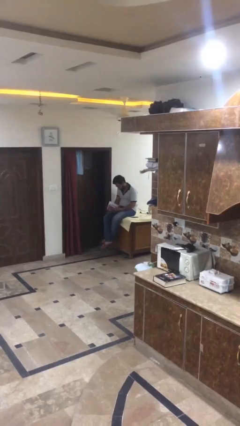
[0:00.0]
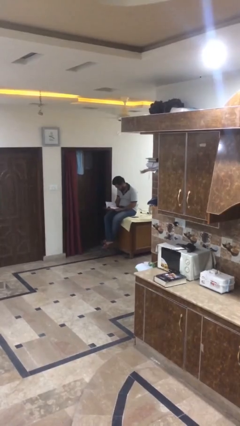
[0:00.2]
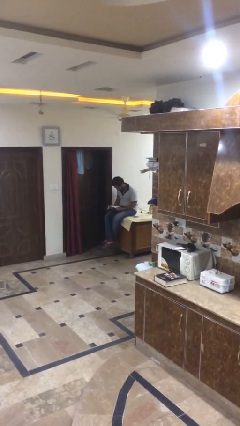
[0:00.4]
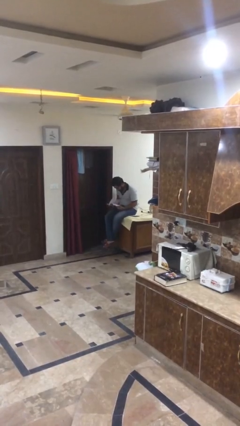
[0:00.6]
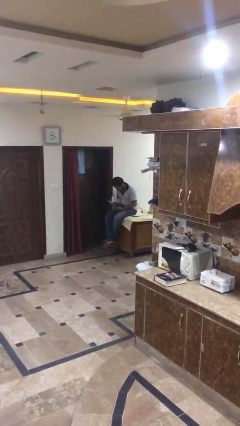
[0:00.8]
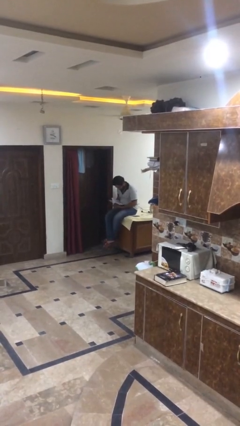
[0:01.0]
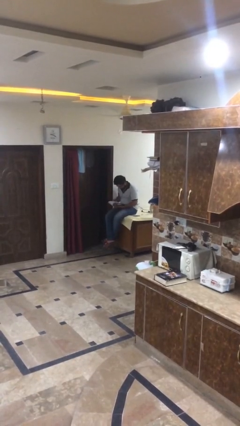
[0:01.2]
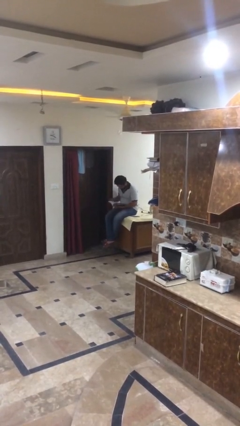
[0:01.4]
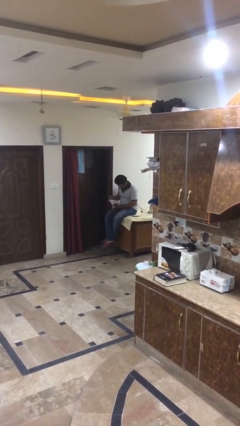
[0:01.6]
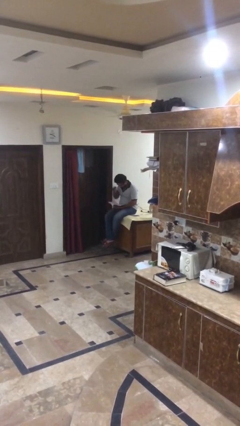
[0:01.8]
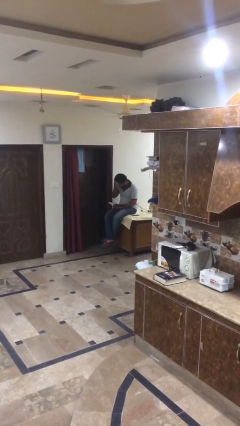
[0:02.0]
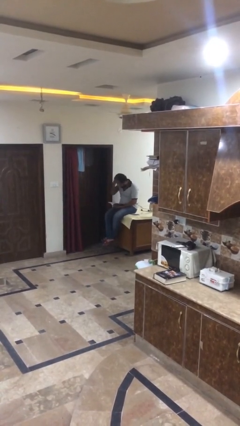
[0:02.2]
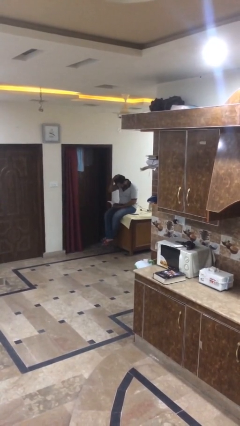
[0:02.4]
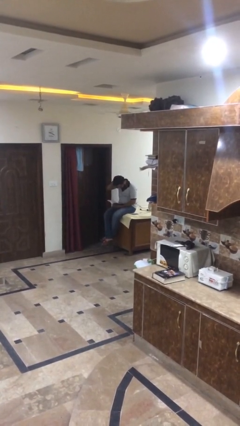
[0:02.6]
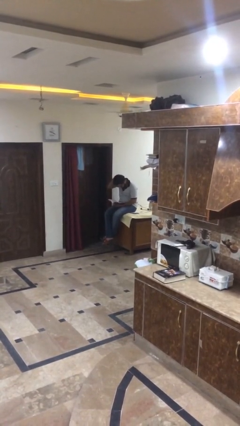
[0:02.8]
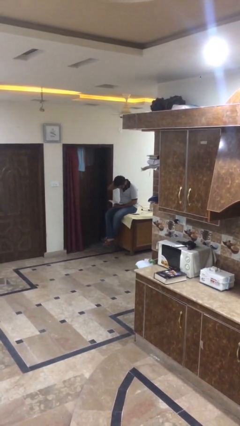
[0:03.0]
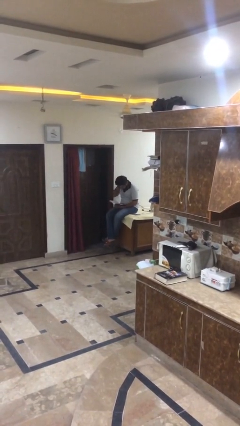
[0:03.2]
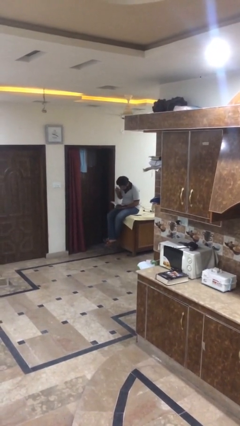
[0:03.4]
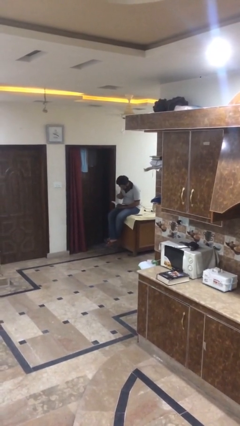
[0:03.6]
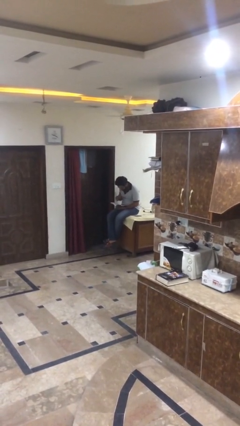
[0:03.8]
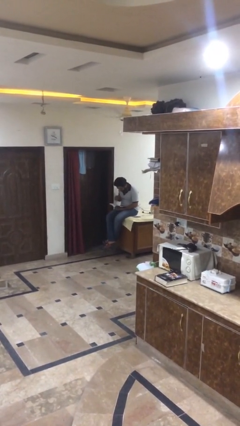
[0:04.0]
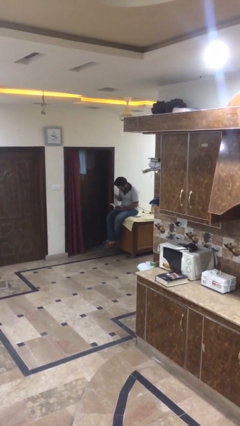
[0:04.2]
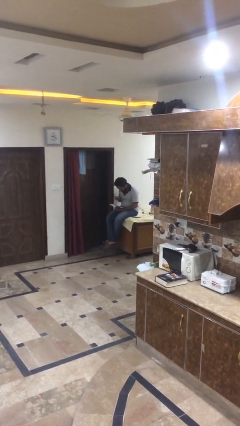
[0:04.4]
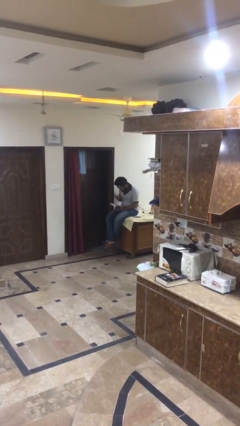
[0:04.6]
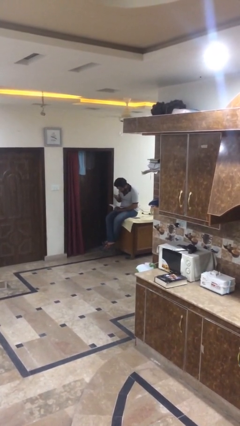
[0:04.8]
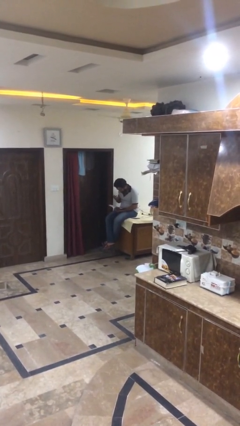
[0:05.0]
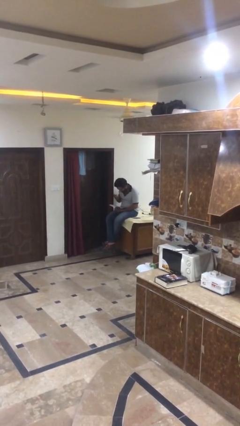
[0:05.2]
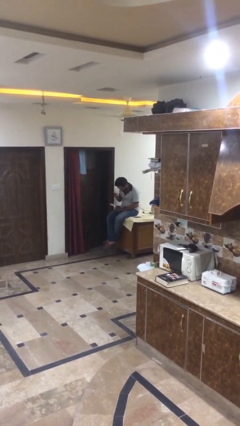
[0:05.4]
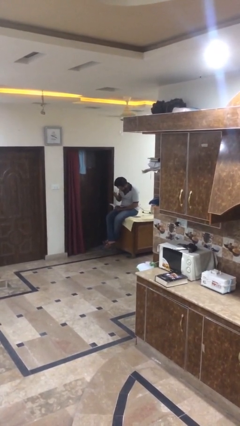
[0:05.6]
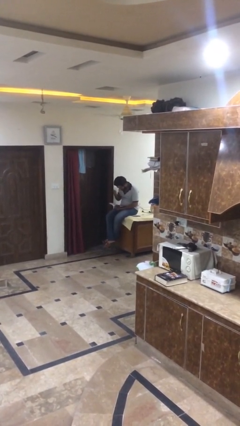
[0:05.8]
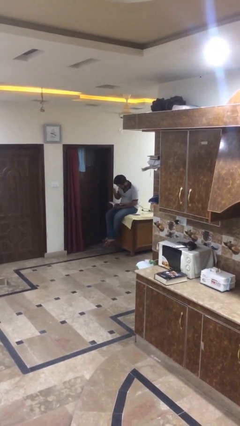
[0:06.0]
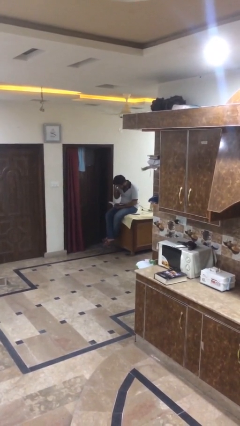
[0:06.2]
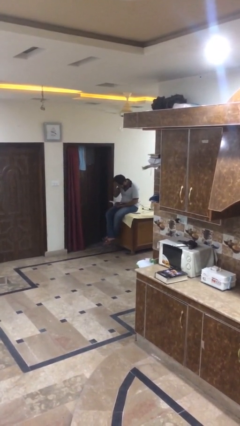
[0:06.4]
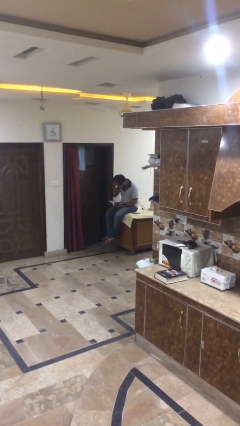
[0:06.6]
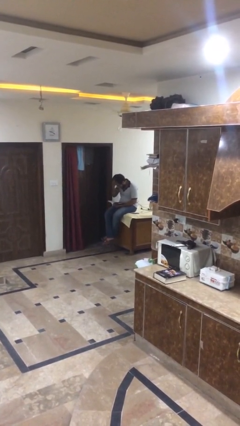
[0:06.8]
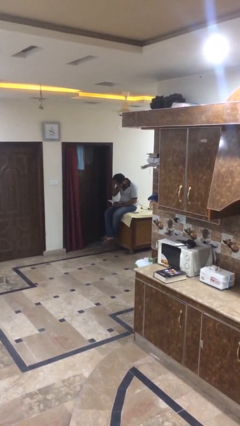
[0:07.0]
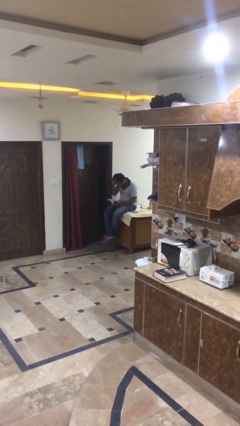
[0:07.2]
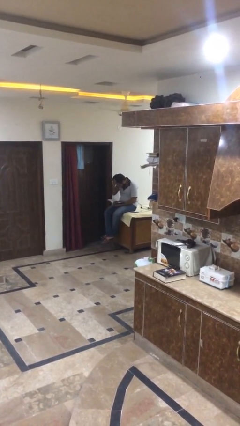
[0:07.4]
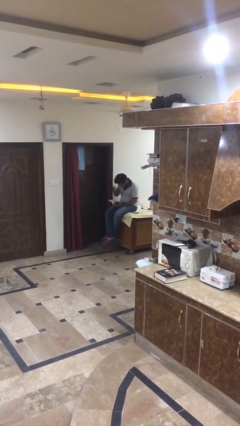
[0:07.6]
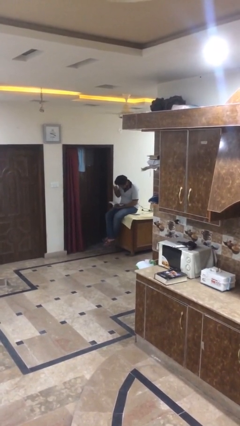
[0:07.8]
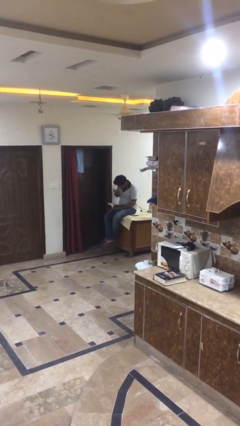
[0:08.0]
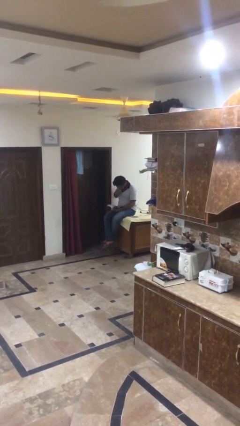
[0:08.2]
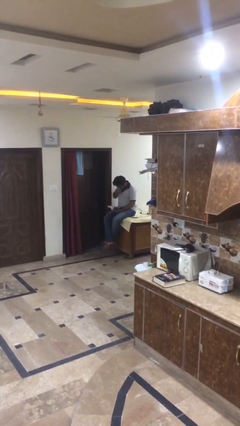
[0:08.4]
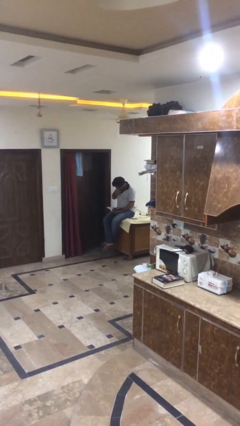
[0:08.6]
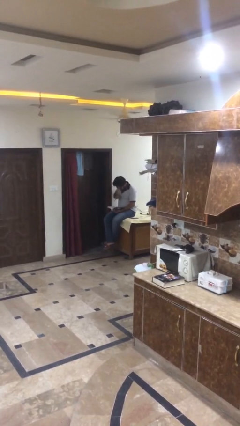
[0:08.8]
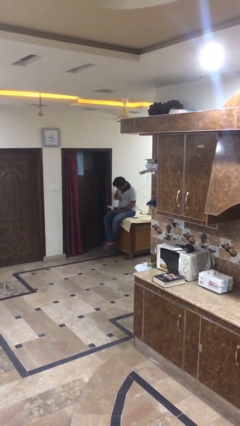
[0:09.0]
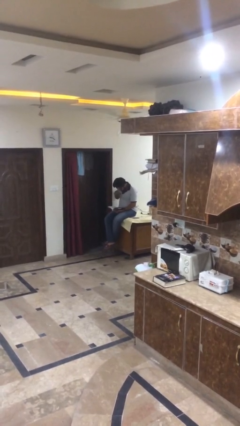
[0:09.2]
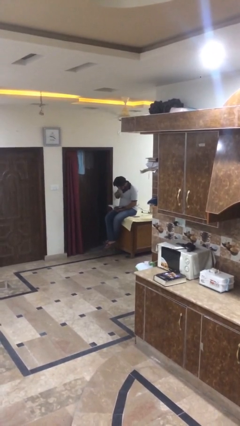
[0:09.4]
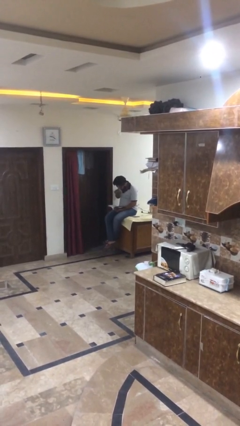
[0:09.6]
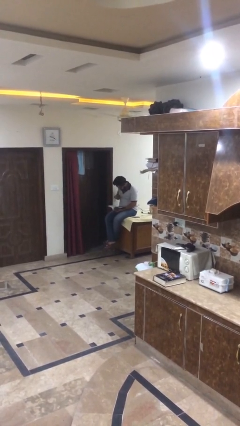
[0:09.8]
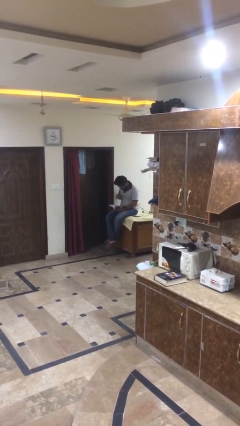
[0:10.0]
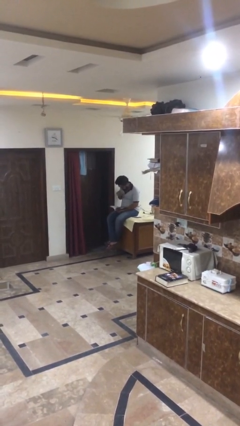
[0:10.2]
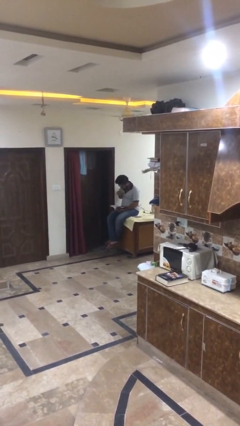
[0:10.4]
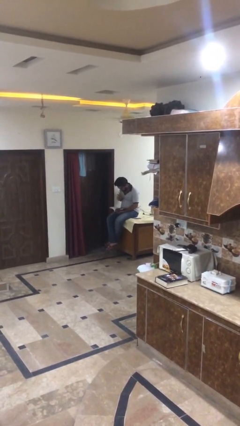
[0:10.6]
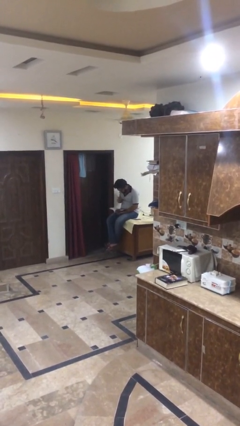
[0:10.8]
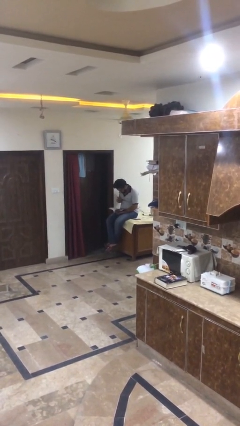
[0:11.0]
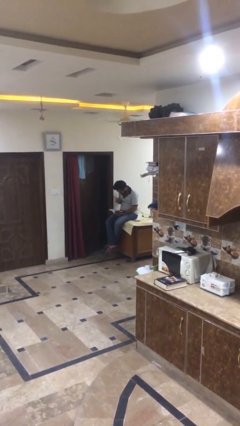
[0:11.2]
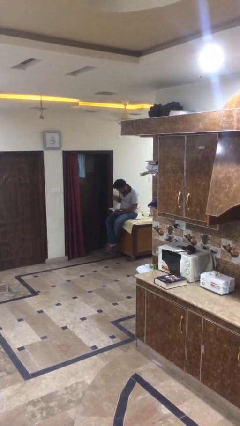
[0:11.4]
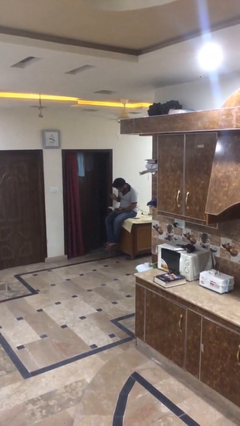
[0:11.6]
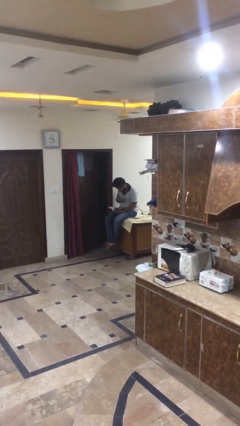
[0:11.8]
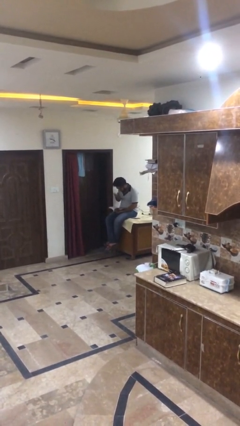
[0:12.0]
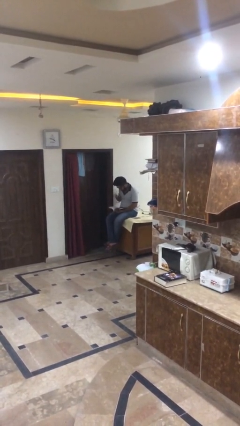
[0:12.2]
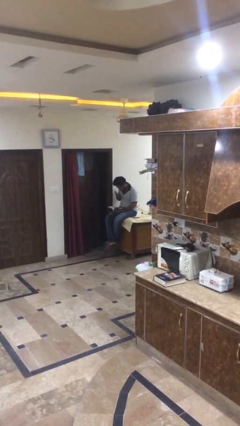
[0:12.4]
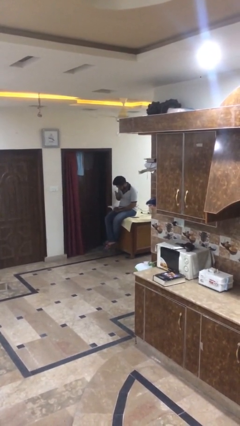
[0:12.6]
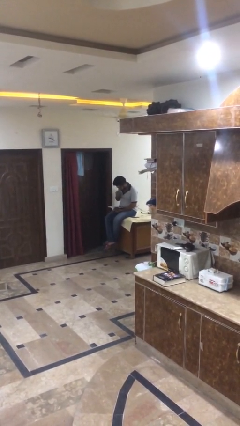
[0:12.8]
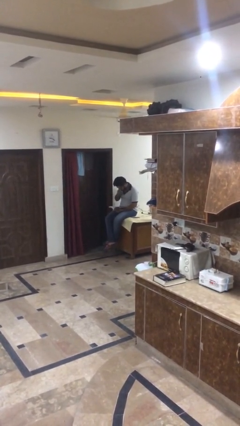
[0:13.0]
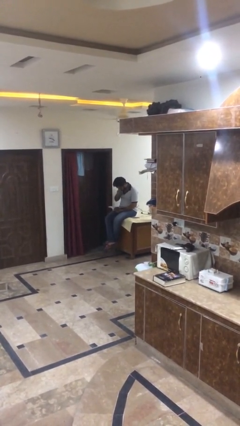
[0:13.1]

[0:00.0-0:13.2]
person reads document

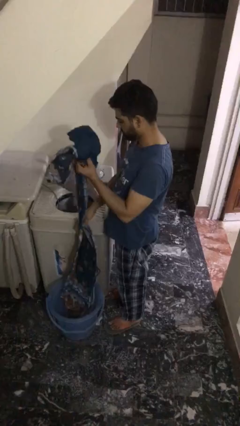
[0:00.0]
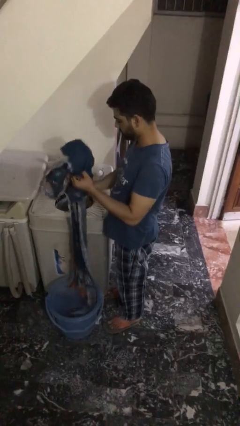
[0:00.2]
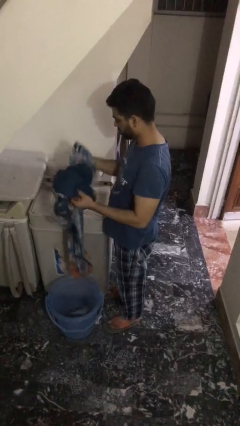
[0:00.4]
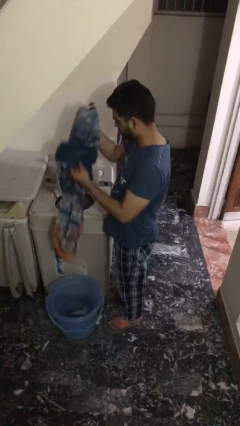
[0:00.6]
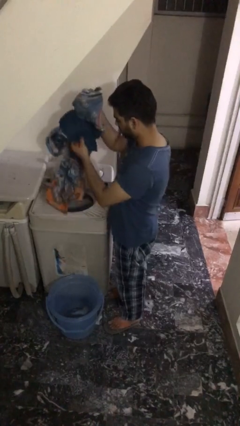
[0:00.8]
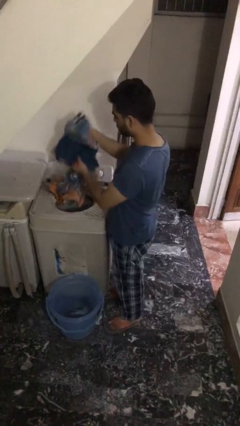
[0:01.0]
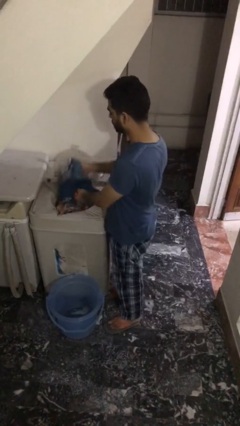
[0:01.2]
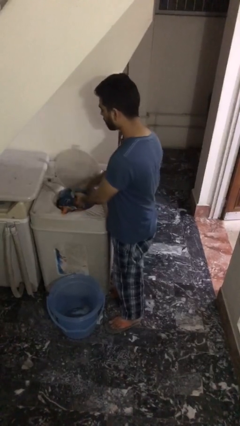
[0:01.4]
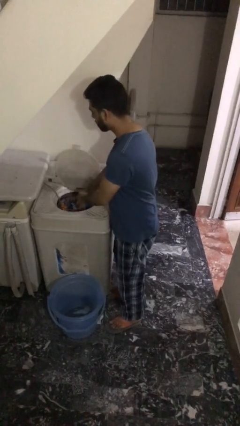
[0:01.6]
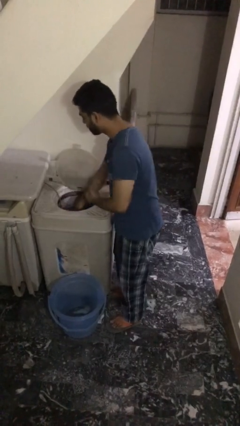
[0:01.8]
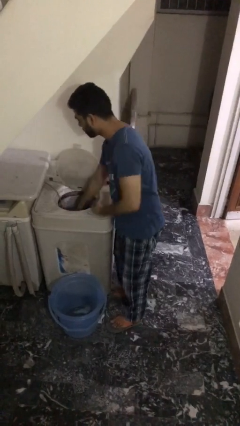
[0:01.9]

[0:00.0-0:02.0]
person loads clotheswasher

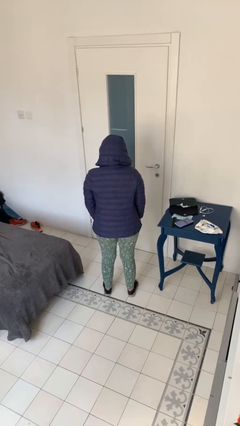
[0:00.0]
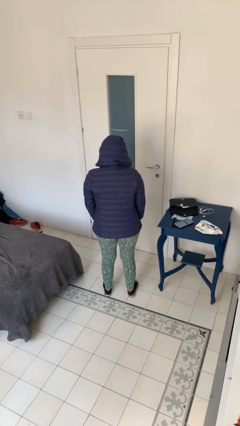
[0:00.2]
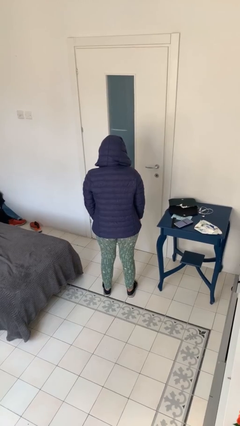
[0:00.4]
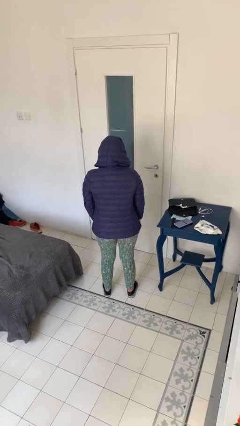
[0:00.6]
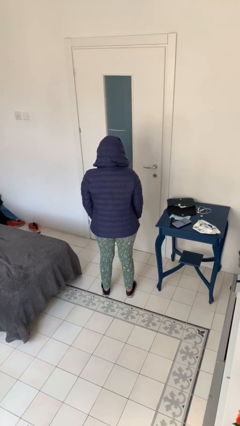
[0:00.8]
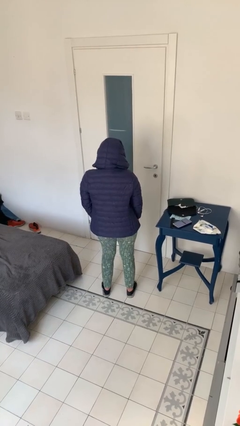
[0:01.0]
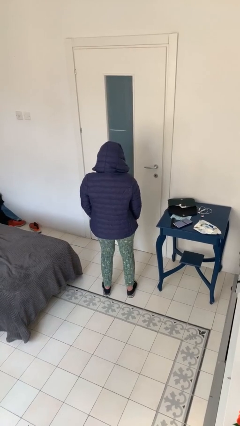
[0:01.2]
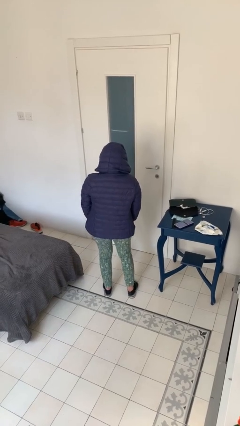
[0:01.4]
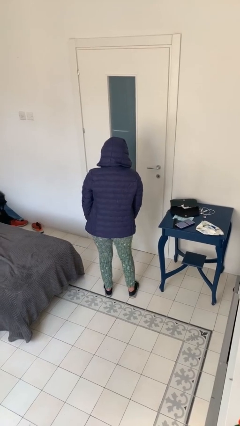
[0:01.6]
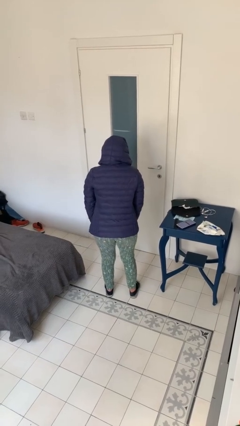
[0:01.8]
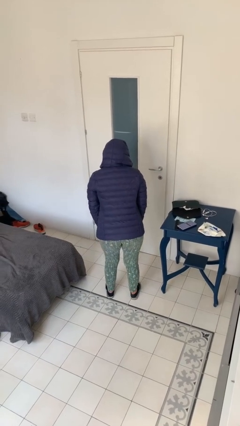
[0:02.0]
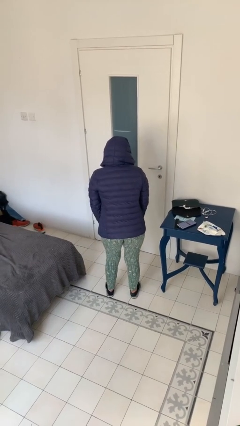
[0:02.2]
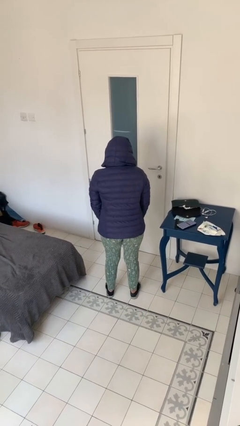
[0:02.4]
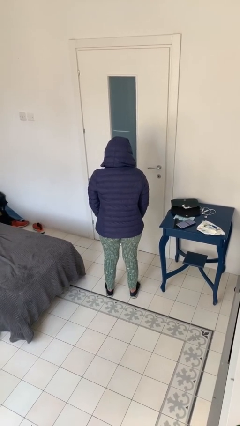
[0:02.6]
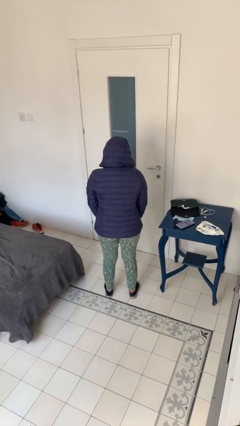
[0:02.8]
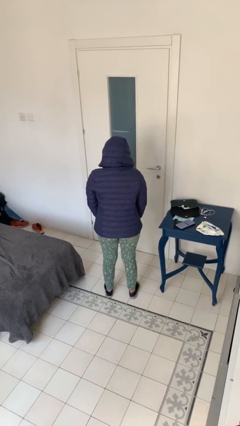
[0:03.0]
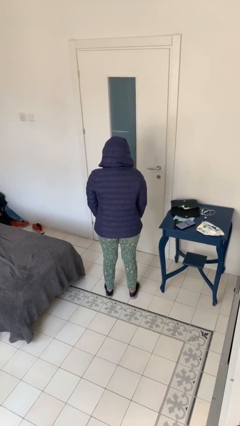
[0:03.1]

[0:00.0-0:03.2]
person wiggles hips
